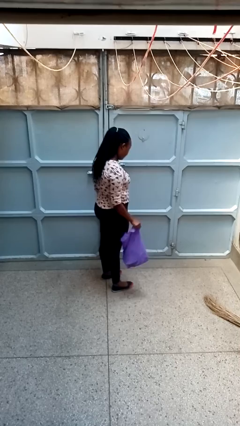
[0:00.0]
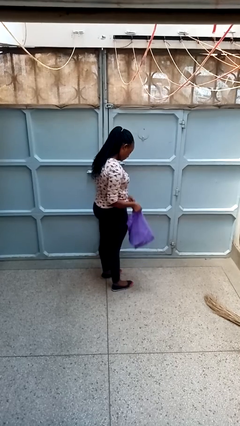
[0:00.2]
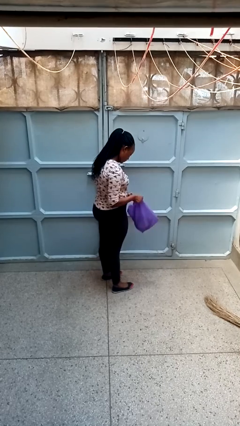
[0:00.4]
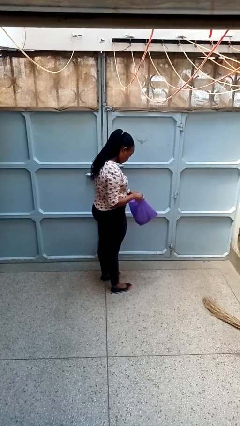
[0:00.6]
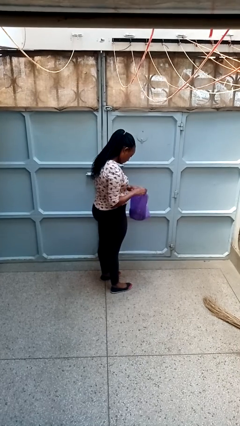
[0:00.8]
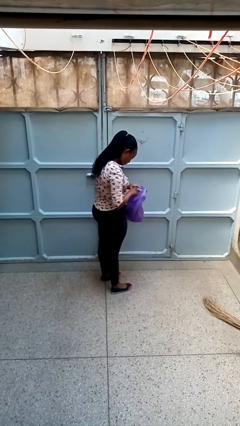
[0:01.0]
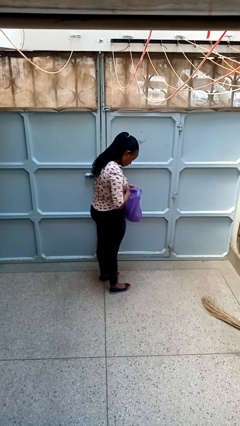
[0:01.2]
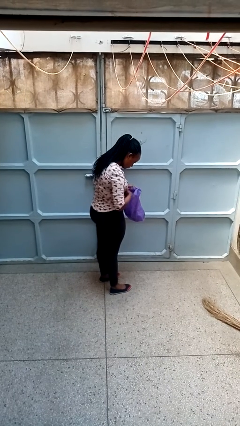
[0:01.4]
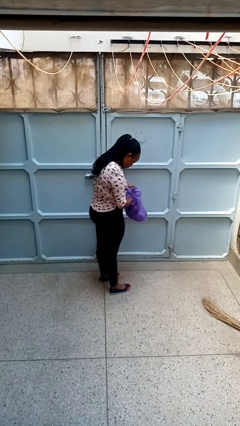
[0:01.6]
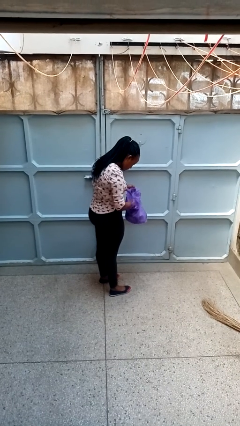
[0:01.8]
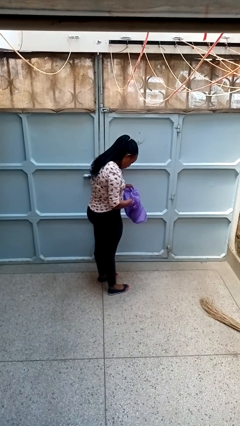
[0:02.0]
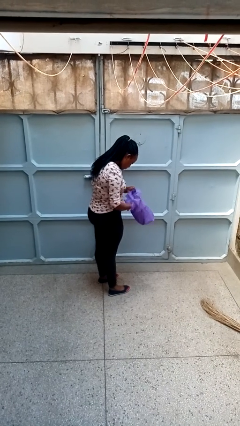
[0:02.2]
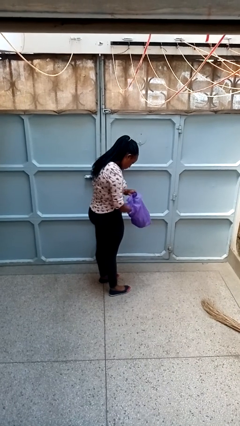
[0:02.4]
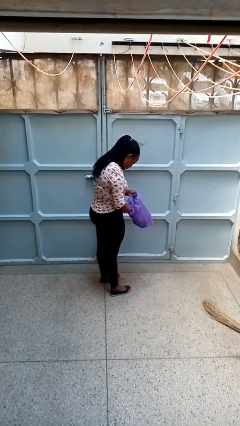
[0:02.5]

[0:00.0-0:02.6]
person searches in bag

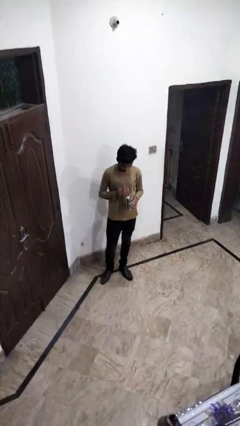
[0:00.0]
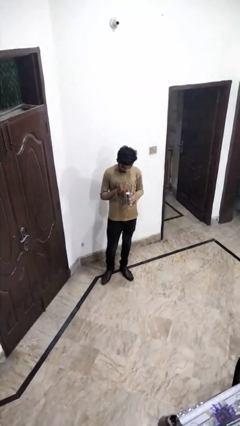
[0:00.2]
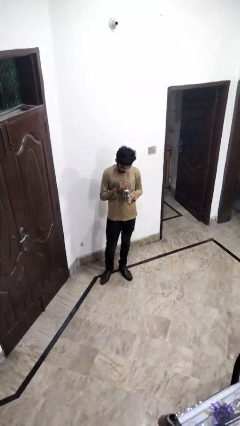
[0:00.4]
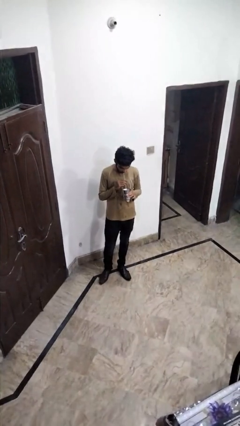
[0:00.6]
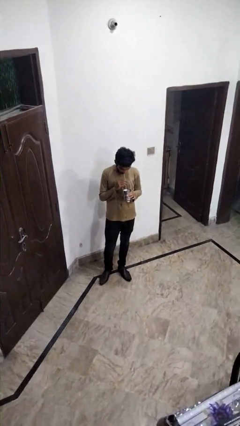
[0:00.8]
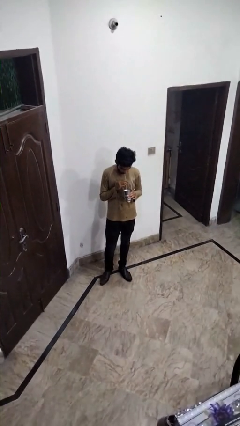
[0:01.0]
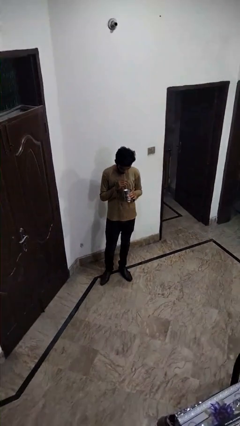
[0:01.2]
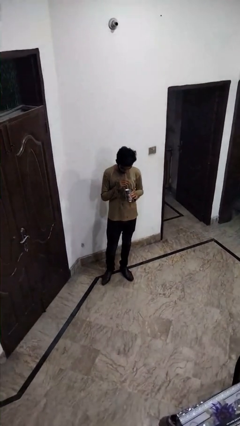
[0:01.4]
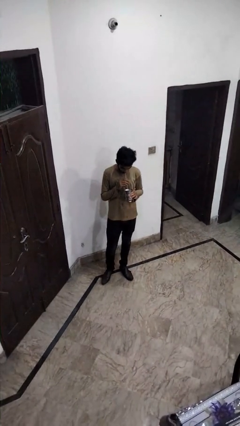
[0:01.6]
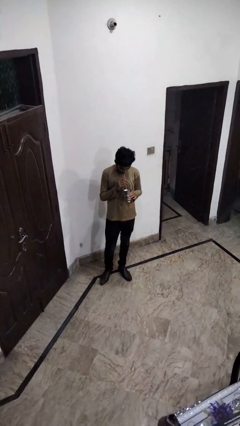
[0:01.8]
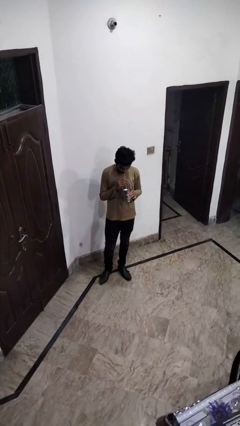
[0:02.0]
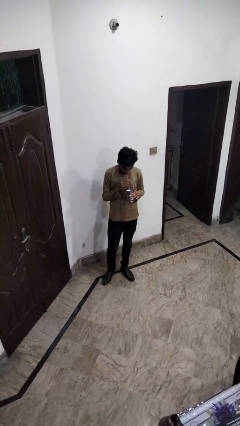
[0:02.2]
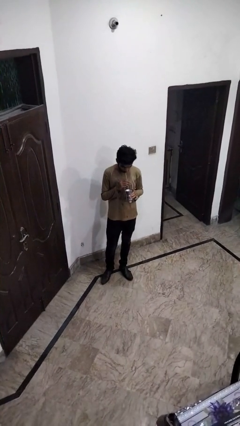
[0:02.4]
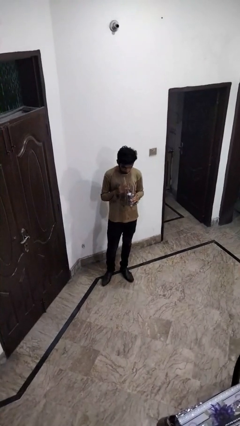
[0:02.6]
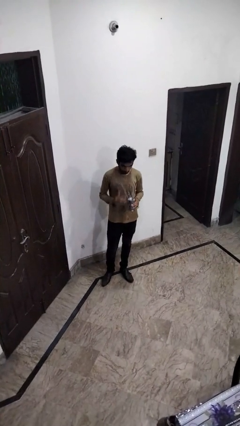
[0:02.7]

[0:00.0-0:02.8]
person drinks from straw

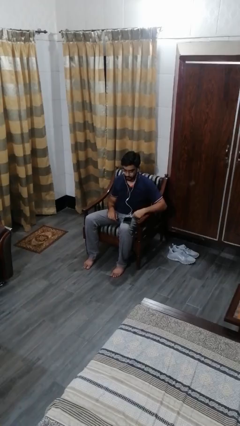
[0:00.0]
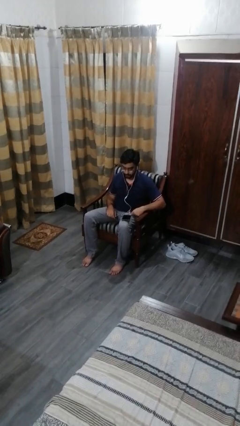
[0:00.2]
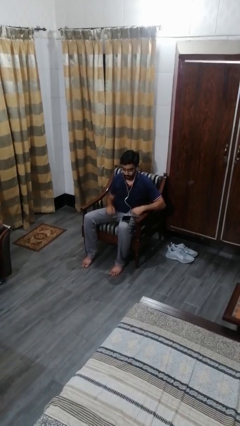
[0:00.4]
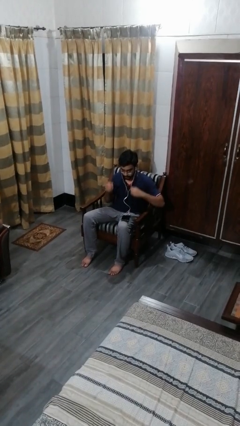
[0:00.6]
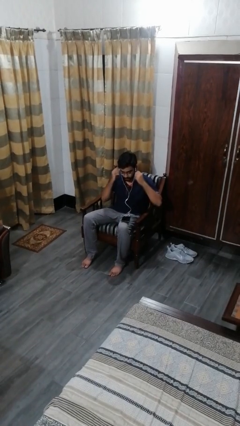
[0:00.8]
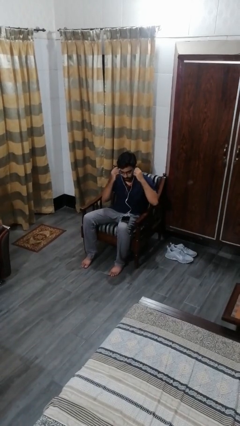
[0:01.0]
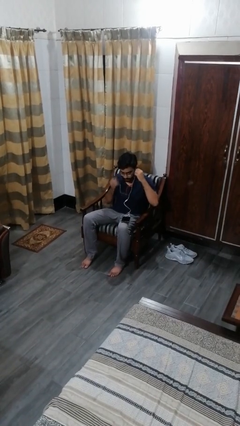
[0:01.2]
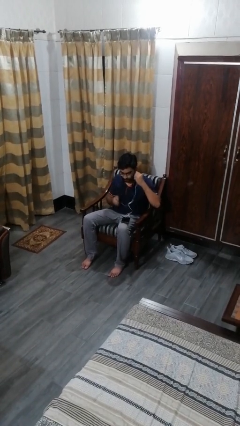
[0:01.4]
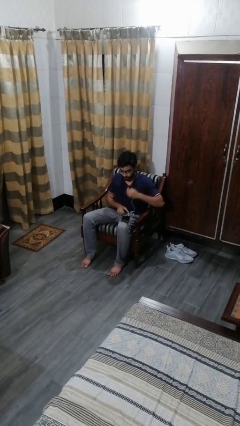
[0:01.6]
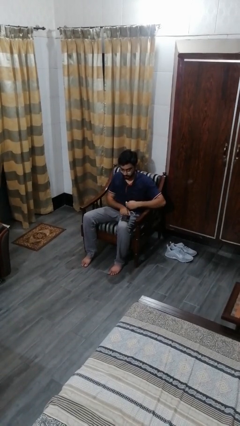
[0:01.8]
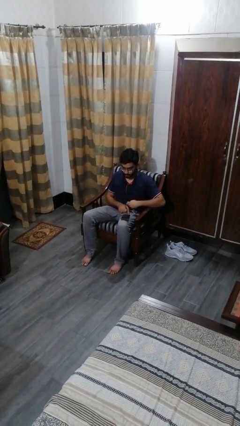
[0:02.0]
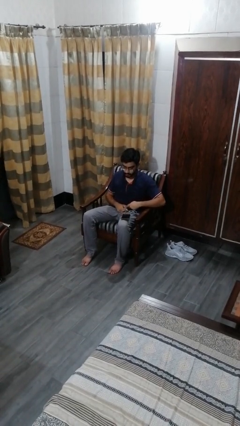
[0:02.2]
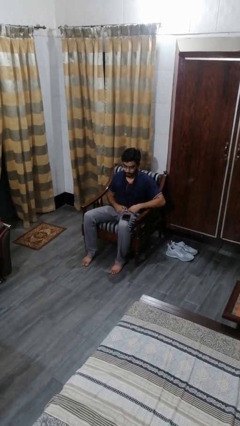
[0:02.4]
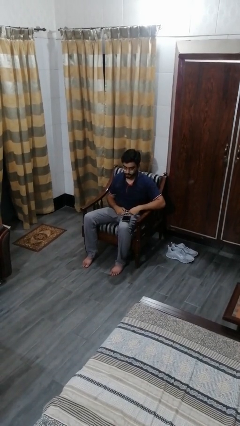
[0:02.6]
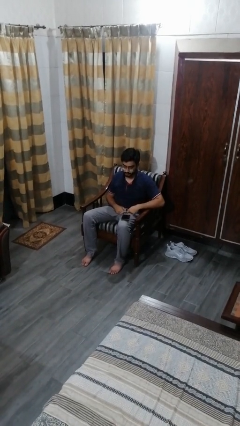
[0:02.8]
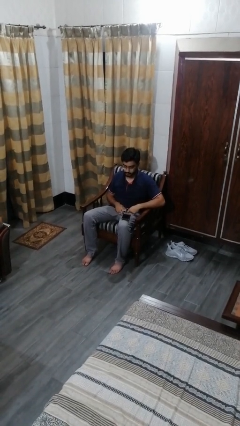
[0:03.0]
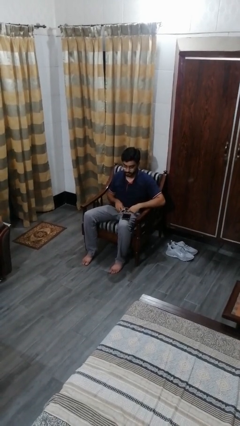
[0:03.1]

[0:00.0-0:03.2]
person takes off headphones

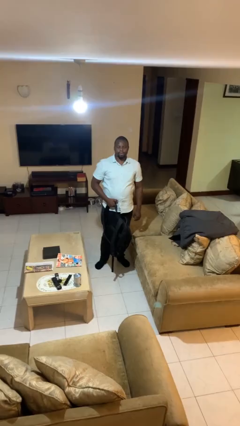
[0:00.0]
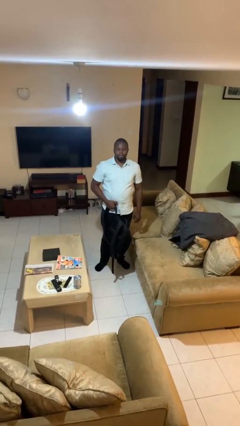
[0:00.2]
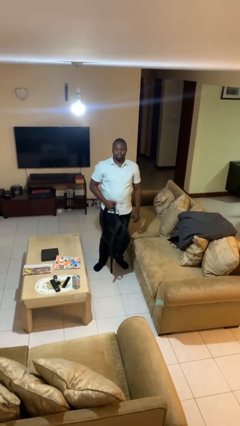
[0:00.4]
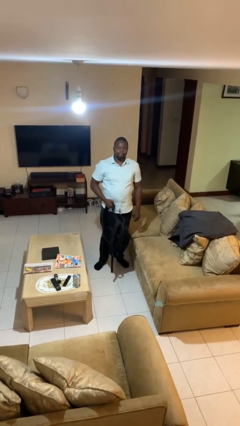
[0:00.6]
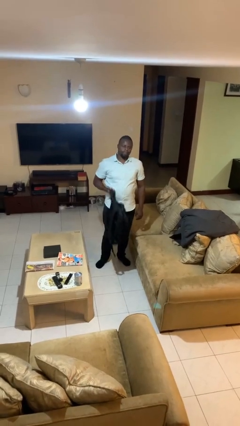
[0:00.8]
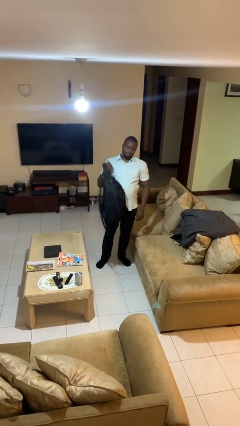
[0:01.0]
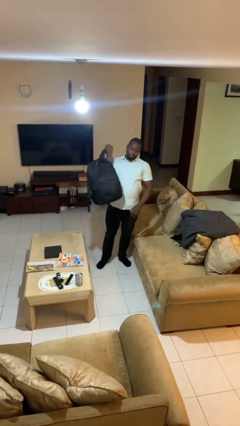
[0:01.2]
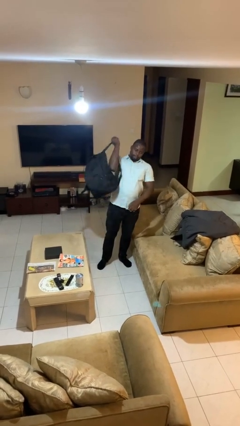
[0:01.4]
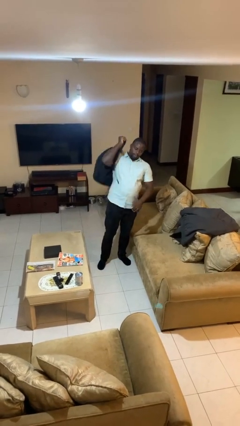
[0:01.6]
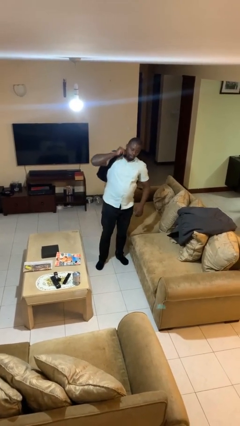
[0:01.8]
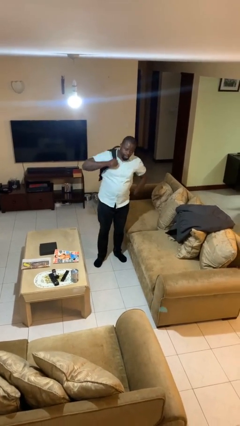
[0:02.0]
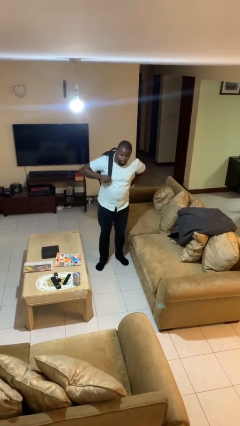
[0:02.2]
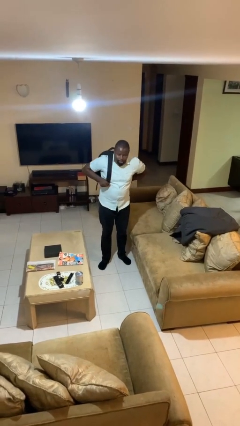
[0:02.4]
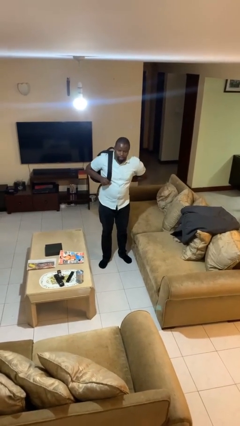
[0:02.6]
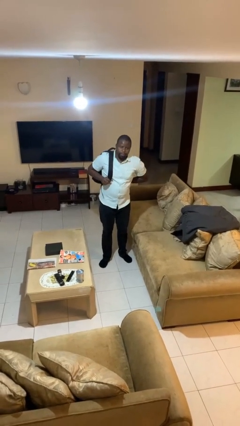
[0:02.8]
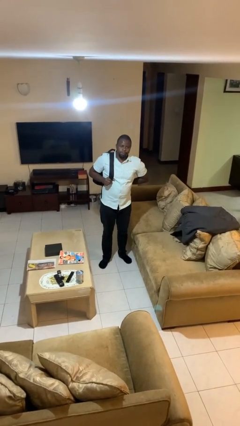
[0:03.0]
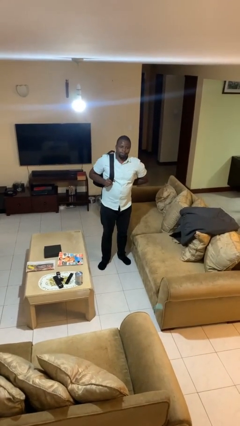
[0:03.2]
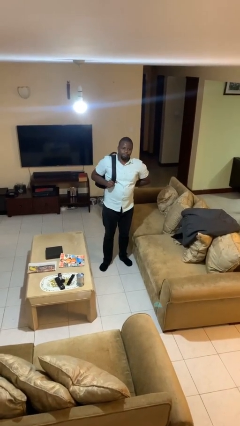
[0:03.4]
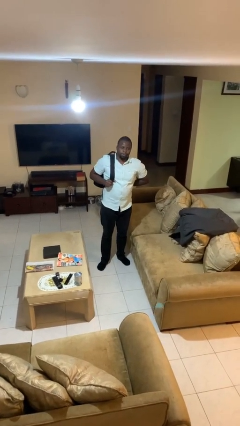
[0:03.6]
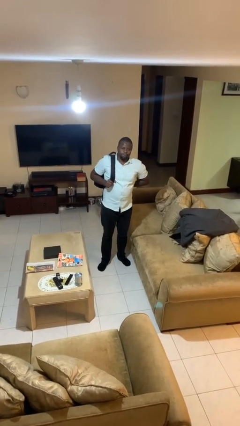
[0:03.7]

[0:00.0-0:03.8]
person puts on backpack

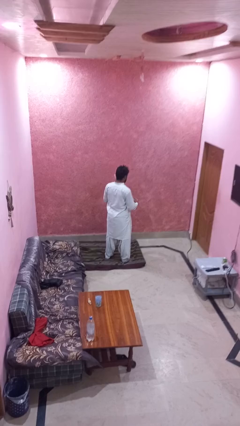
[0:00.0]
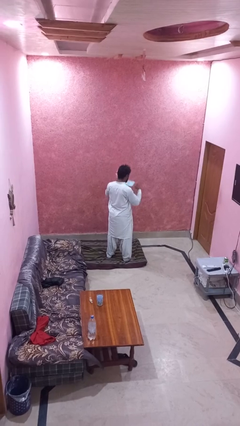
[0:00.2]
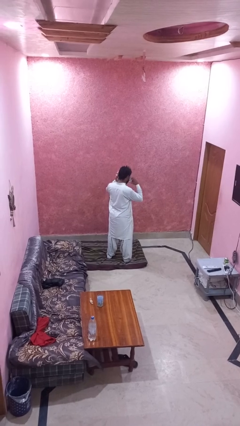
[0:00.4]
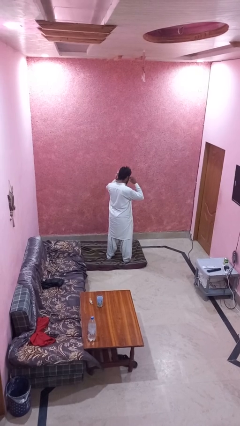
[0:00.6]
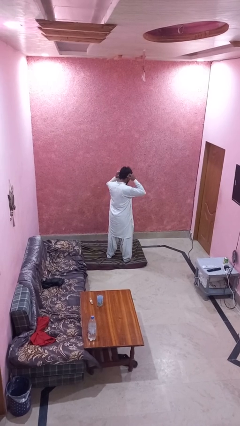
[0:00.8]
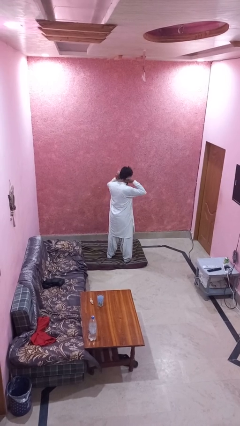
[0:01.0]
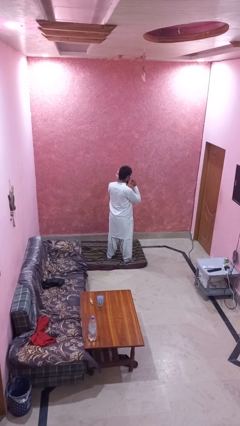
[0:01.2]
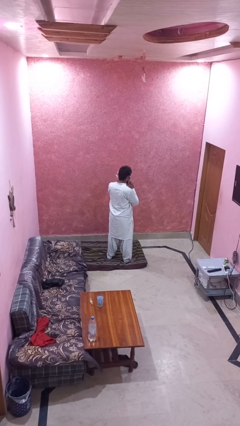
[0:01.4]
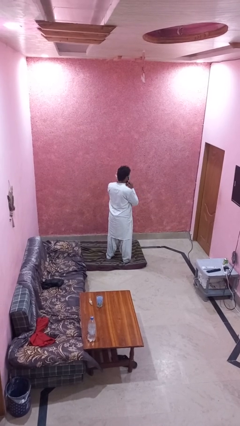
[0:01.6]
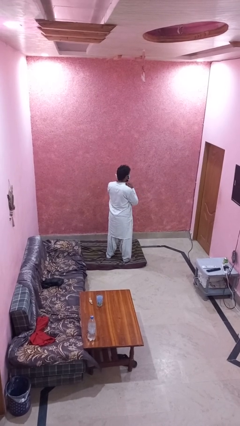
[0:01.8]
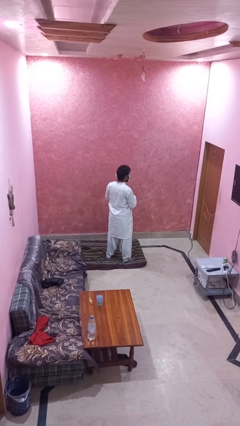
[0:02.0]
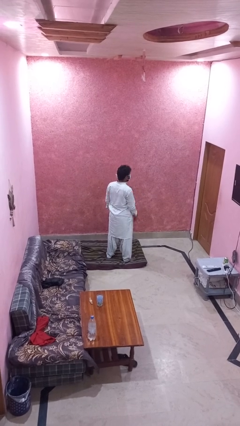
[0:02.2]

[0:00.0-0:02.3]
person puts on facemask

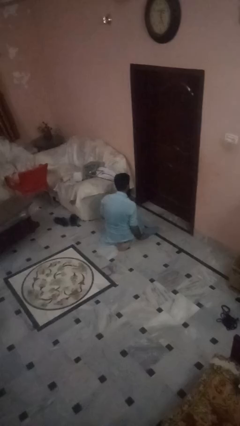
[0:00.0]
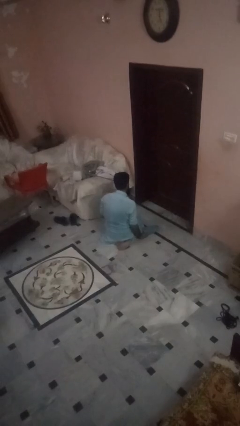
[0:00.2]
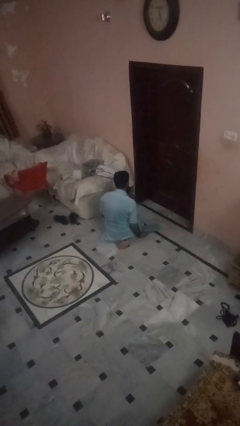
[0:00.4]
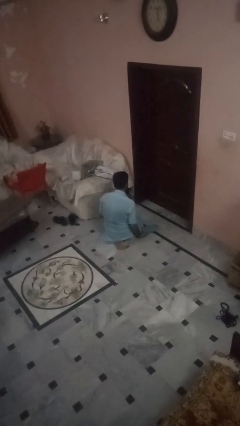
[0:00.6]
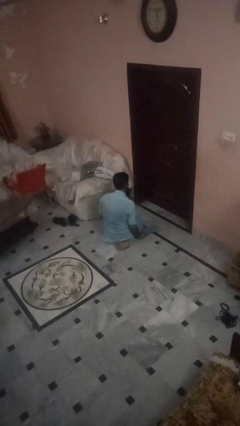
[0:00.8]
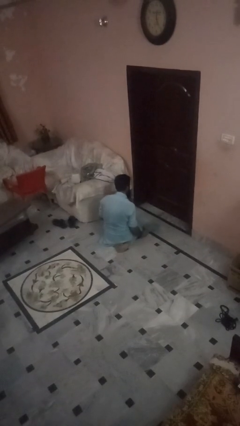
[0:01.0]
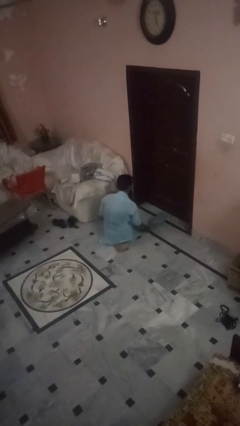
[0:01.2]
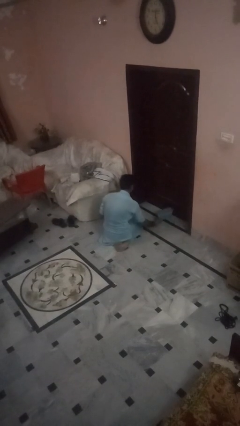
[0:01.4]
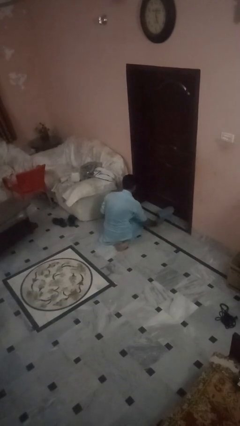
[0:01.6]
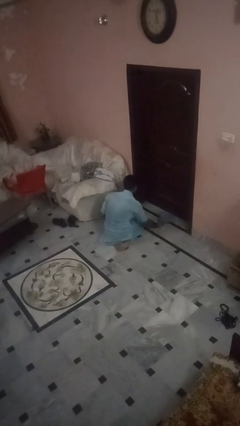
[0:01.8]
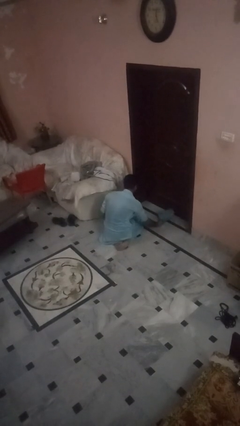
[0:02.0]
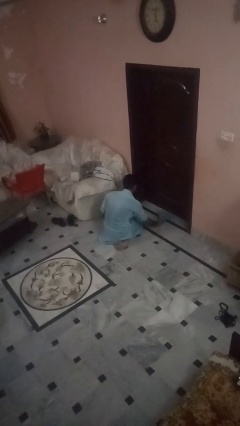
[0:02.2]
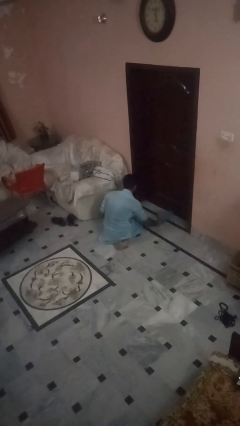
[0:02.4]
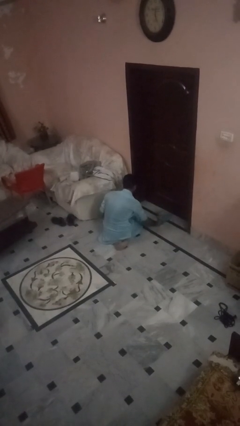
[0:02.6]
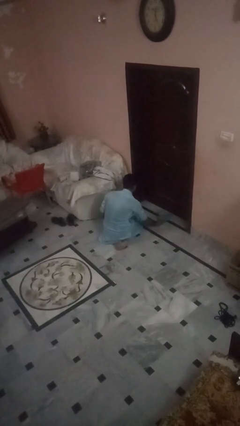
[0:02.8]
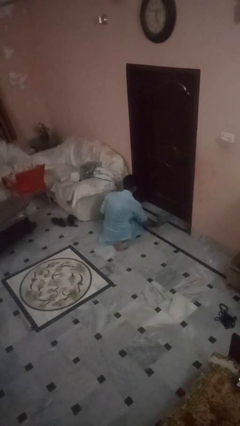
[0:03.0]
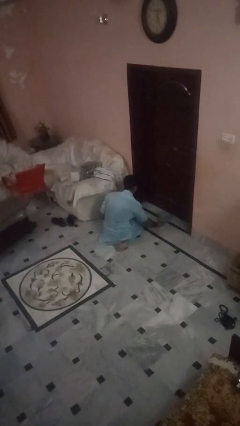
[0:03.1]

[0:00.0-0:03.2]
person swats bug
